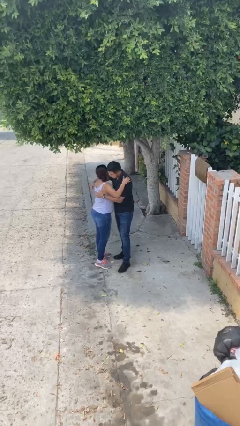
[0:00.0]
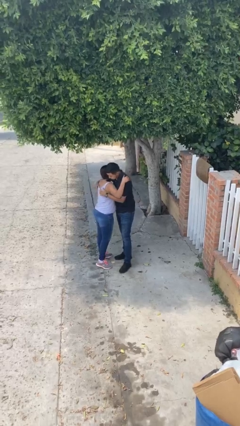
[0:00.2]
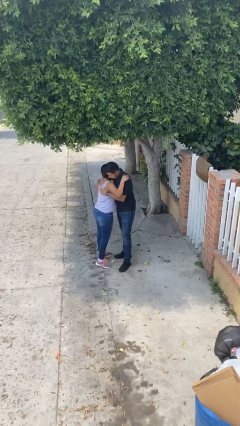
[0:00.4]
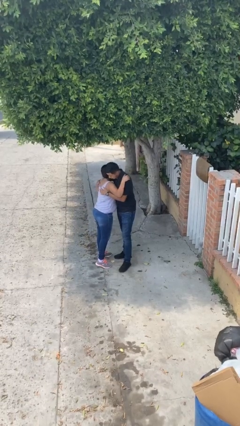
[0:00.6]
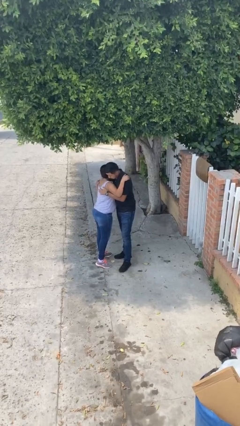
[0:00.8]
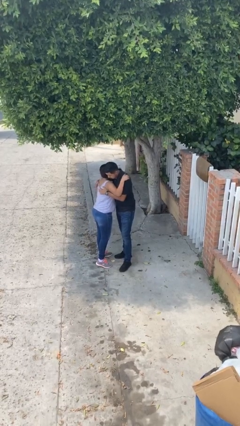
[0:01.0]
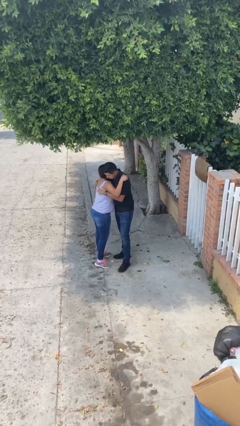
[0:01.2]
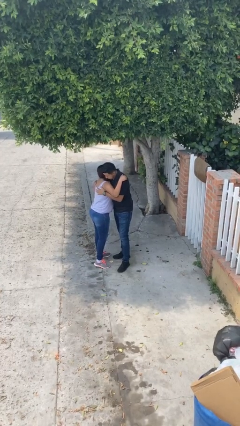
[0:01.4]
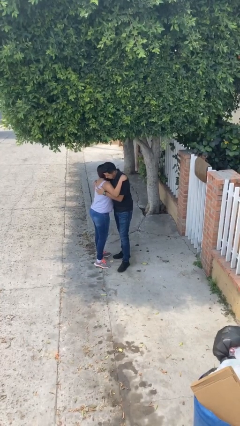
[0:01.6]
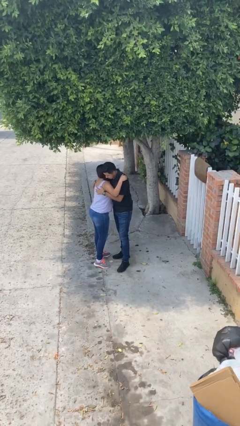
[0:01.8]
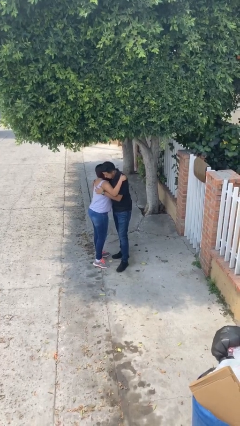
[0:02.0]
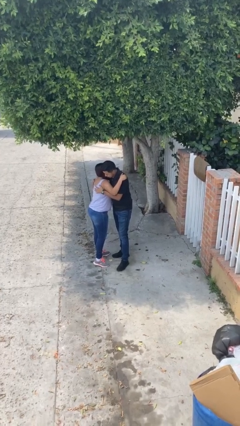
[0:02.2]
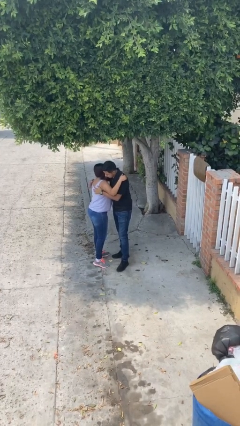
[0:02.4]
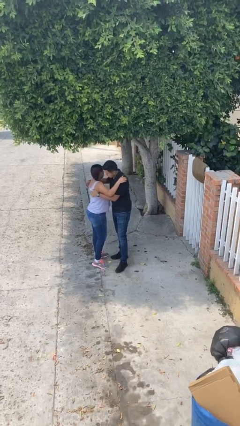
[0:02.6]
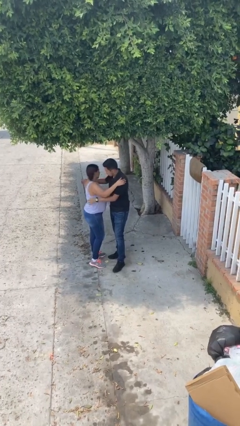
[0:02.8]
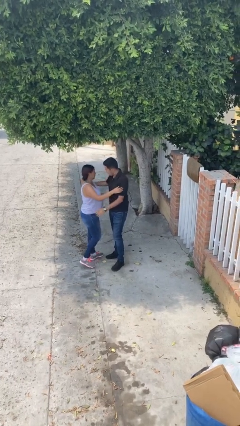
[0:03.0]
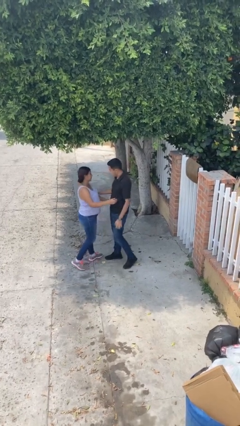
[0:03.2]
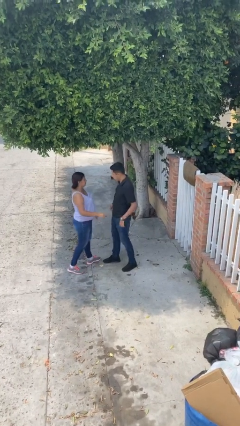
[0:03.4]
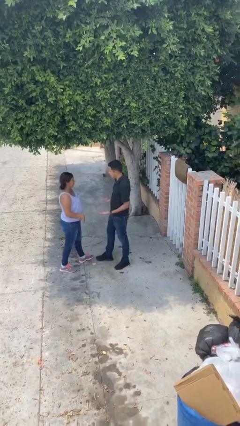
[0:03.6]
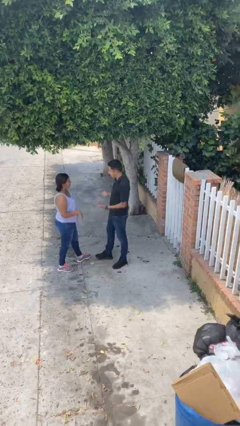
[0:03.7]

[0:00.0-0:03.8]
person embraces person

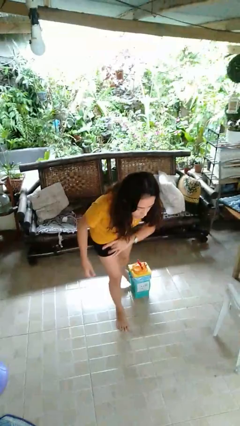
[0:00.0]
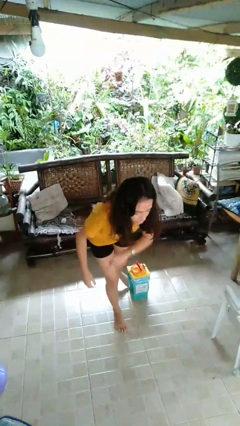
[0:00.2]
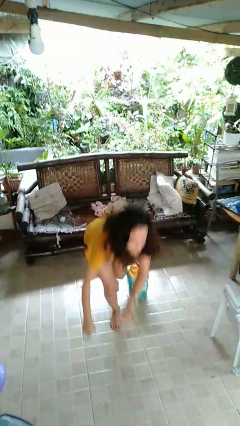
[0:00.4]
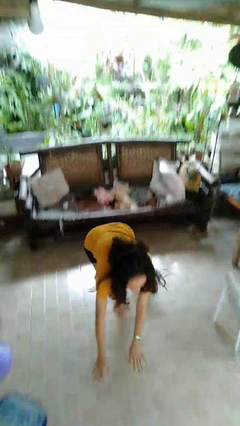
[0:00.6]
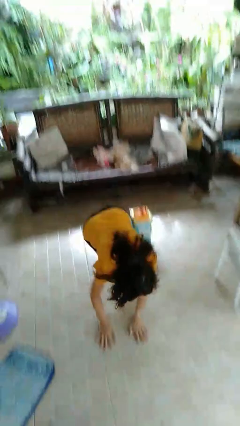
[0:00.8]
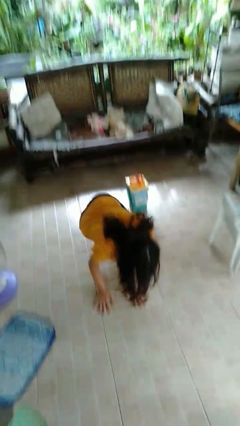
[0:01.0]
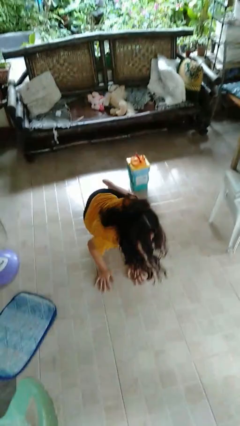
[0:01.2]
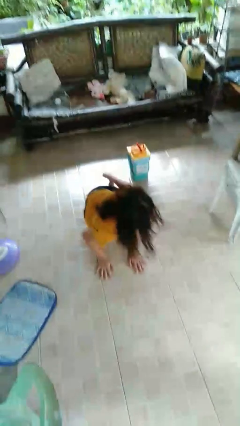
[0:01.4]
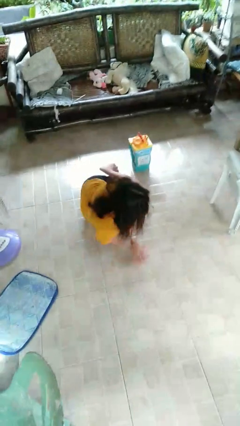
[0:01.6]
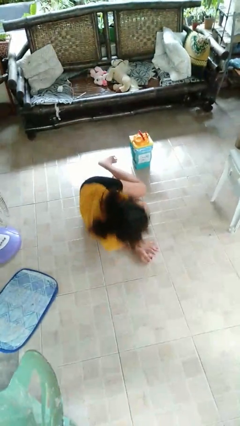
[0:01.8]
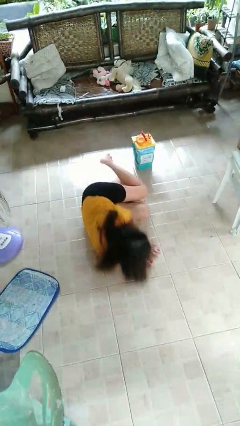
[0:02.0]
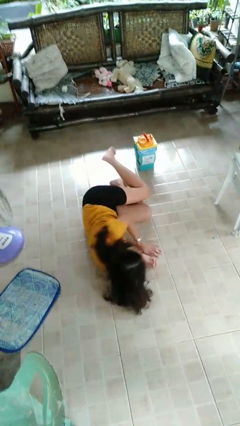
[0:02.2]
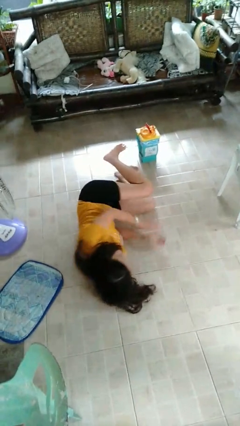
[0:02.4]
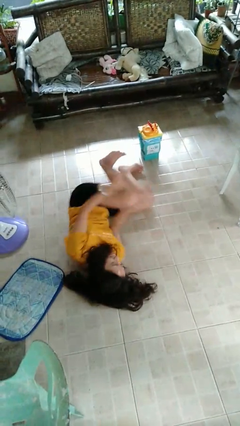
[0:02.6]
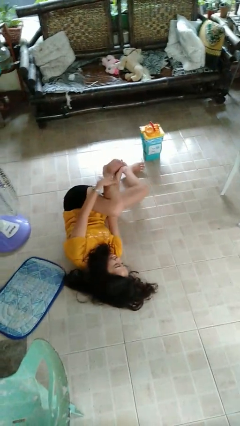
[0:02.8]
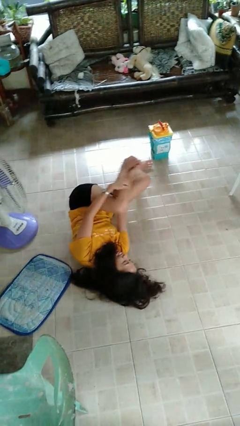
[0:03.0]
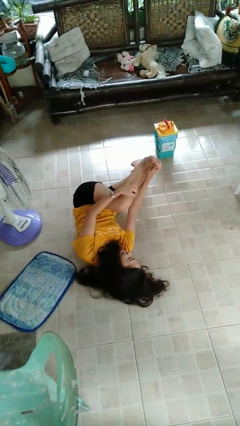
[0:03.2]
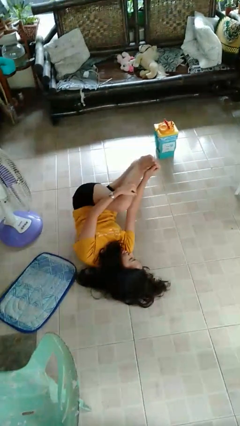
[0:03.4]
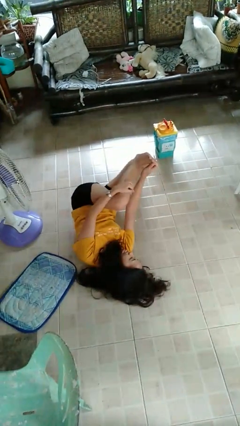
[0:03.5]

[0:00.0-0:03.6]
person lies down on floor

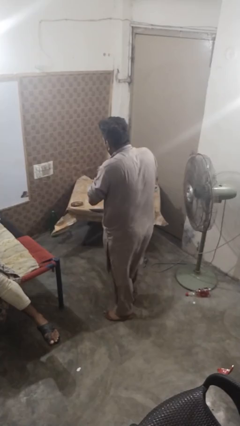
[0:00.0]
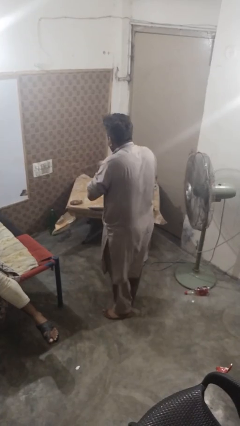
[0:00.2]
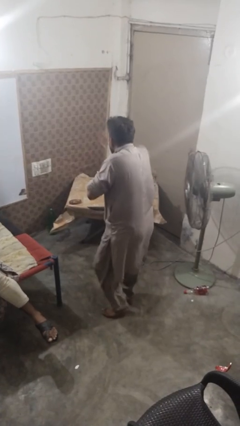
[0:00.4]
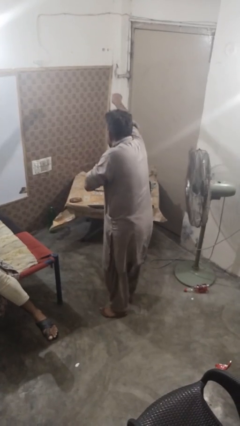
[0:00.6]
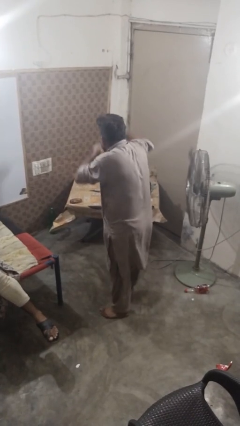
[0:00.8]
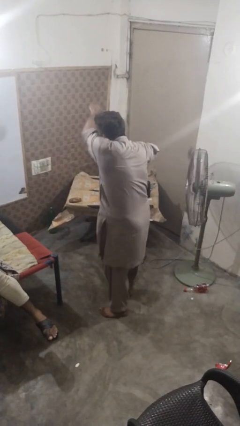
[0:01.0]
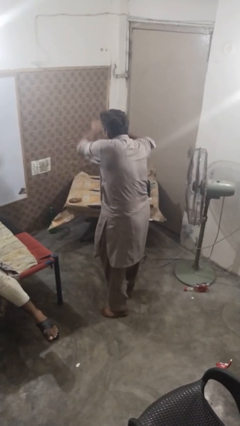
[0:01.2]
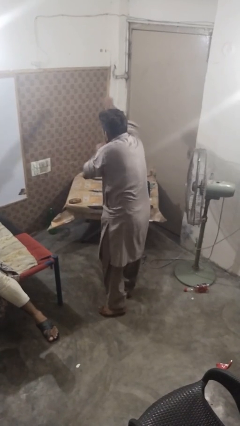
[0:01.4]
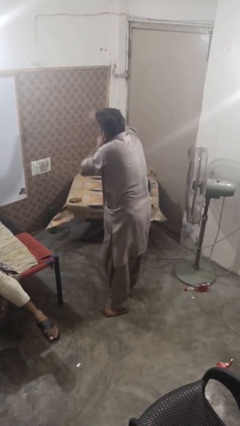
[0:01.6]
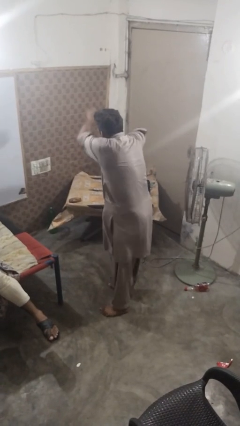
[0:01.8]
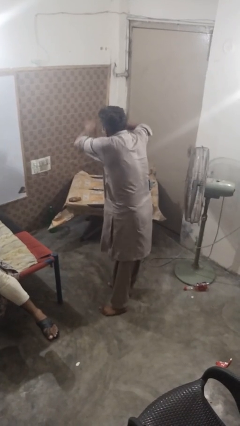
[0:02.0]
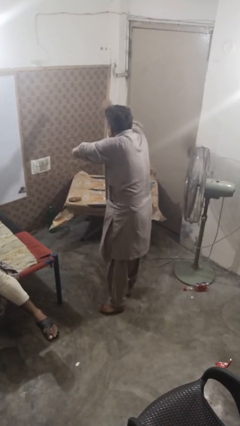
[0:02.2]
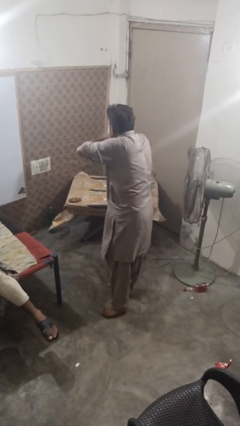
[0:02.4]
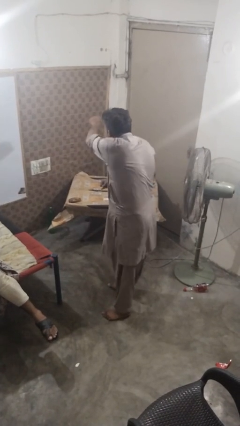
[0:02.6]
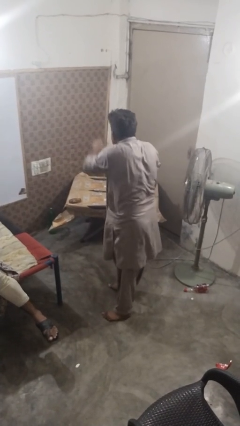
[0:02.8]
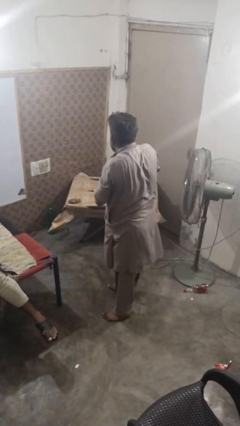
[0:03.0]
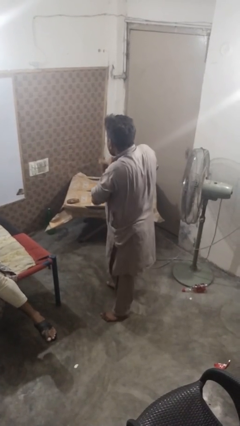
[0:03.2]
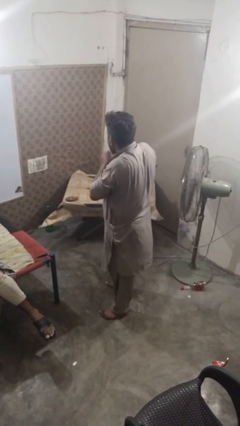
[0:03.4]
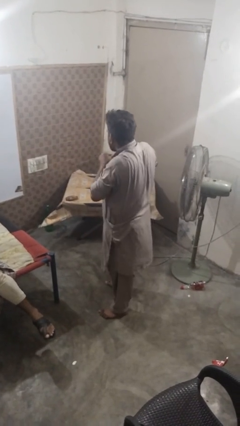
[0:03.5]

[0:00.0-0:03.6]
person punches

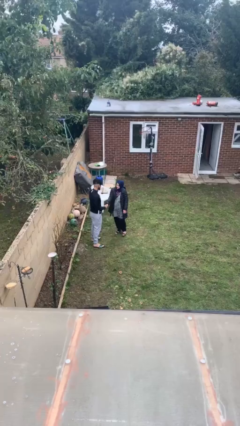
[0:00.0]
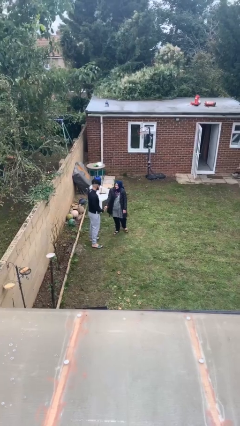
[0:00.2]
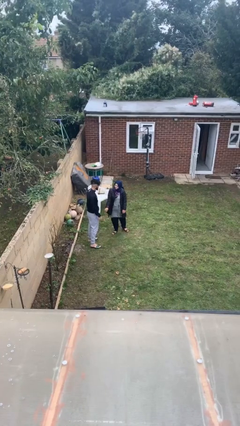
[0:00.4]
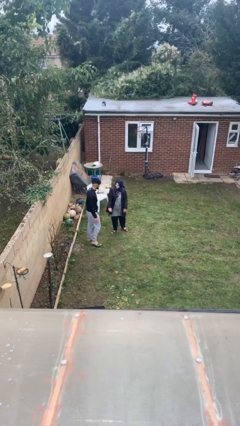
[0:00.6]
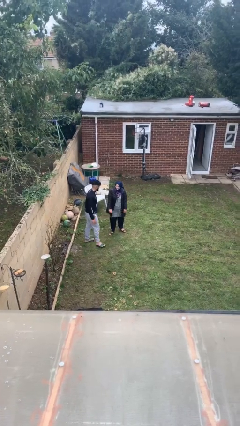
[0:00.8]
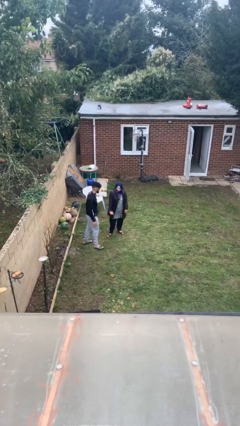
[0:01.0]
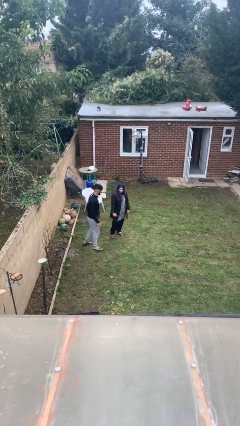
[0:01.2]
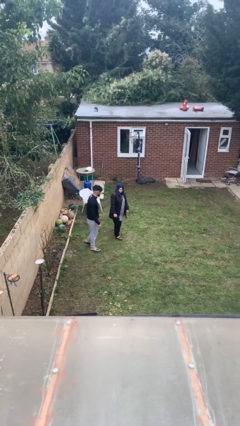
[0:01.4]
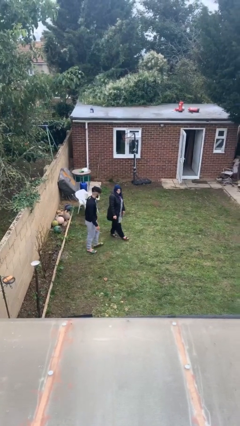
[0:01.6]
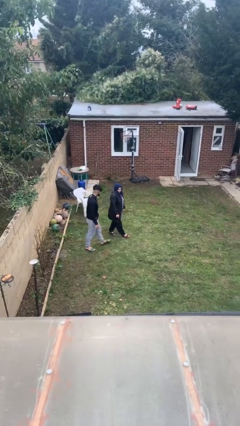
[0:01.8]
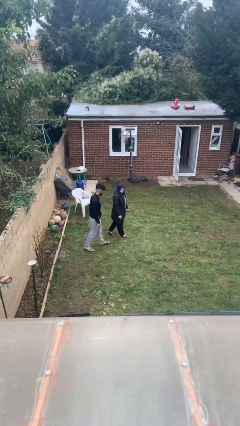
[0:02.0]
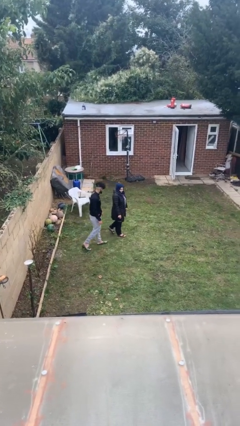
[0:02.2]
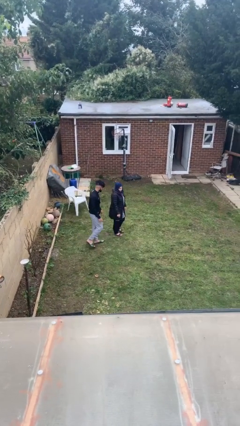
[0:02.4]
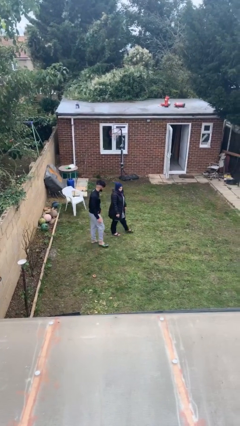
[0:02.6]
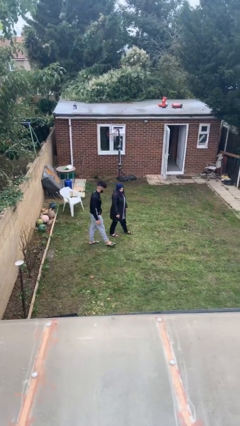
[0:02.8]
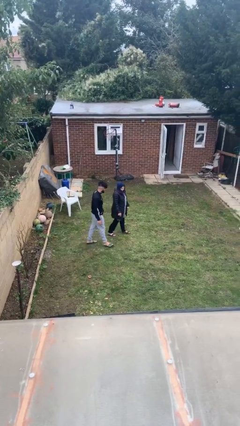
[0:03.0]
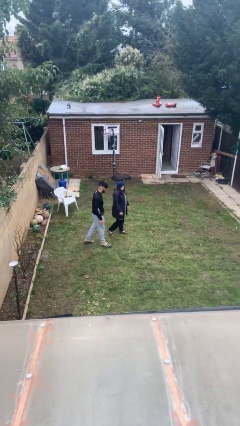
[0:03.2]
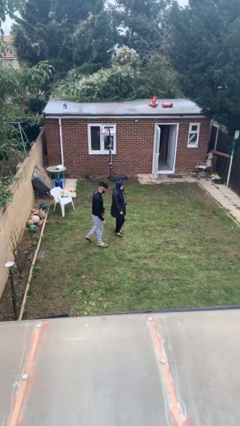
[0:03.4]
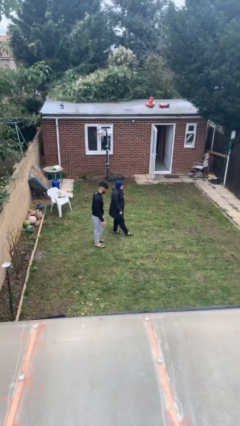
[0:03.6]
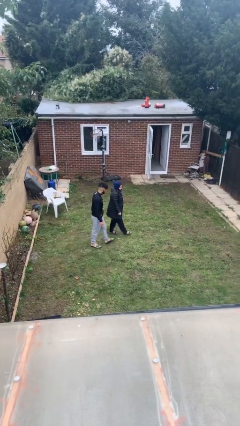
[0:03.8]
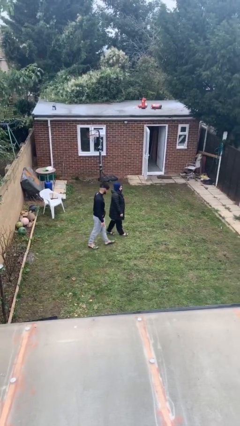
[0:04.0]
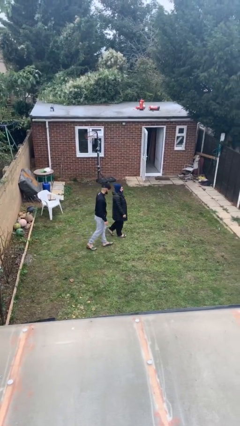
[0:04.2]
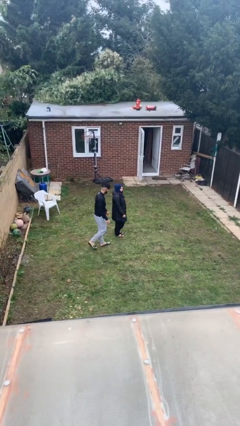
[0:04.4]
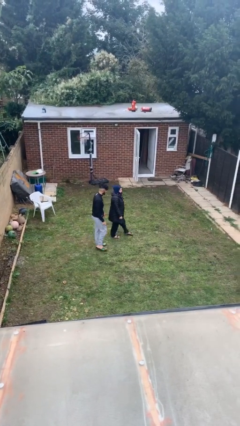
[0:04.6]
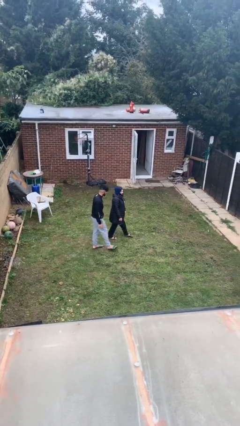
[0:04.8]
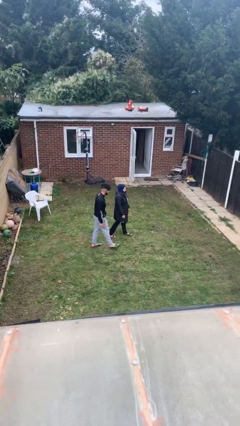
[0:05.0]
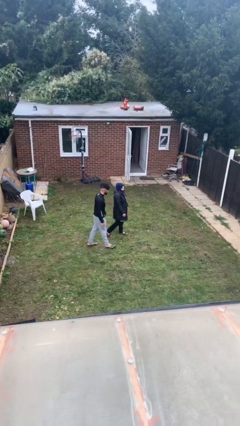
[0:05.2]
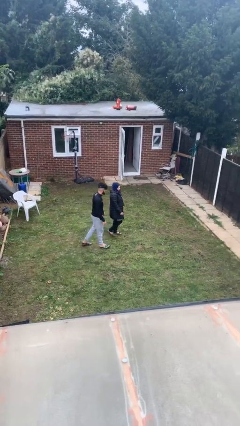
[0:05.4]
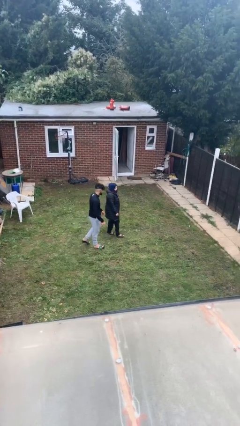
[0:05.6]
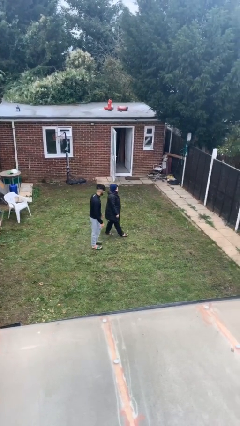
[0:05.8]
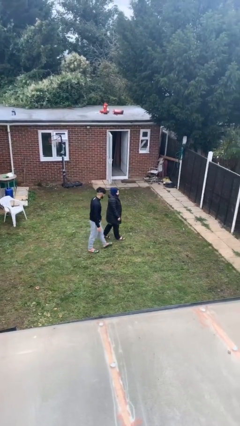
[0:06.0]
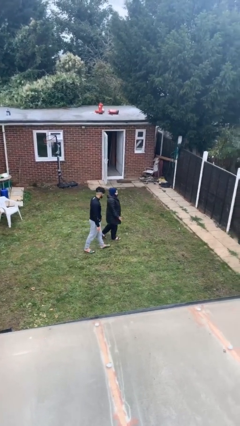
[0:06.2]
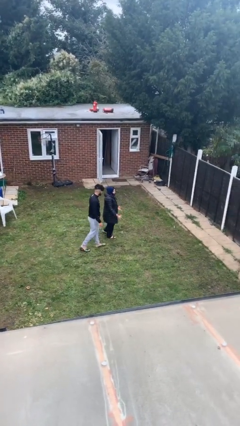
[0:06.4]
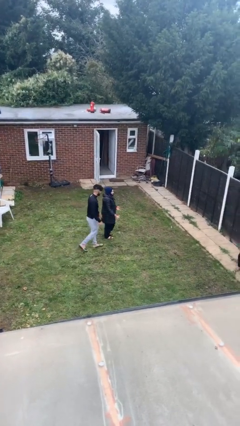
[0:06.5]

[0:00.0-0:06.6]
person talks to person

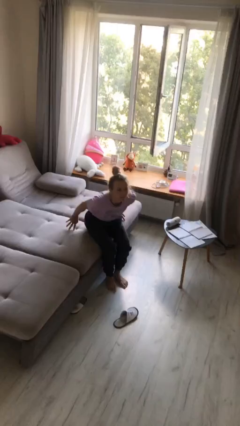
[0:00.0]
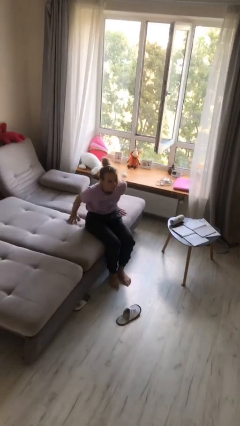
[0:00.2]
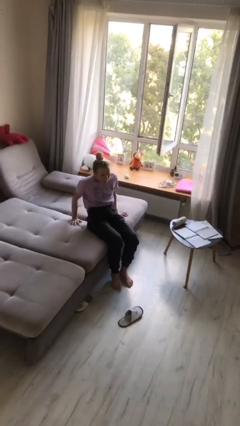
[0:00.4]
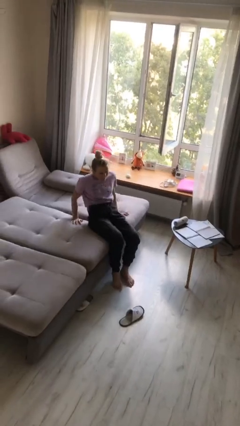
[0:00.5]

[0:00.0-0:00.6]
person lies down on bed
